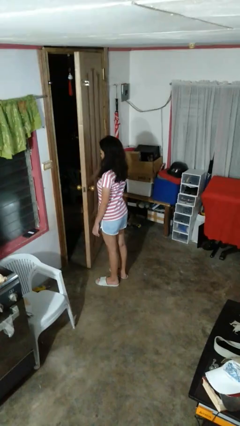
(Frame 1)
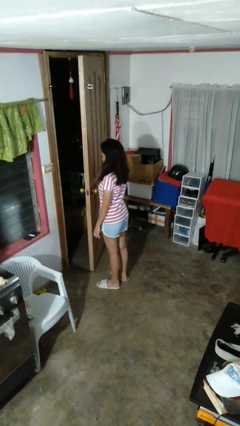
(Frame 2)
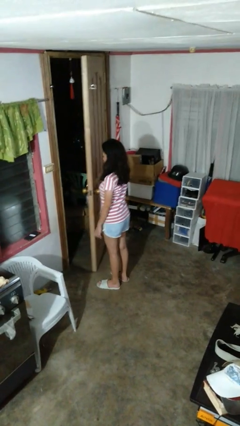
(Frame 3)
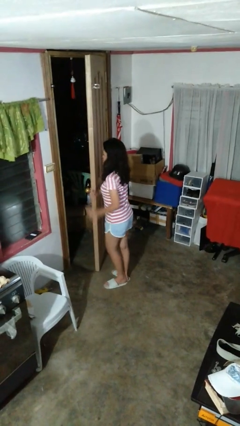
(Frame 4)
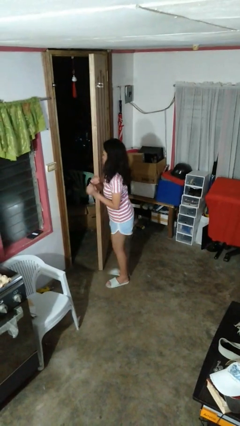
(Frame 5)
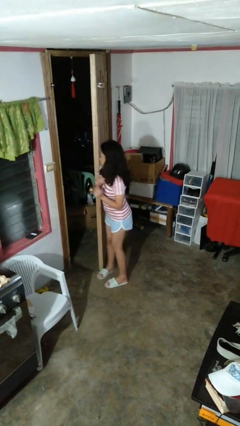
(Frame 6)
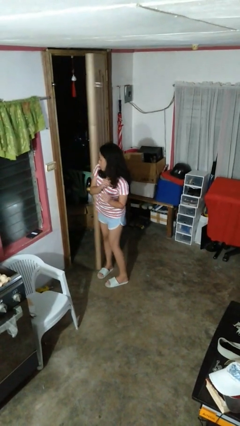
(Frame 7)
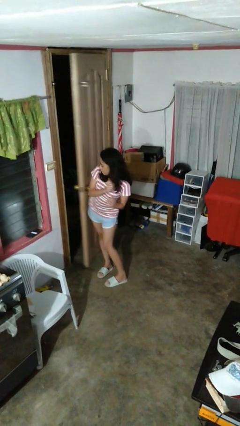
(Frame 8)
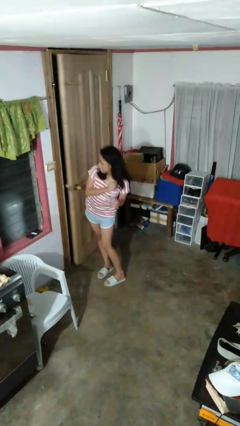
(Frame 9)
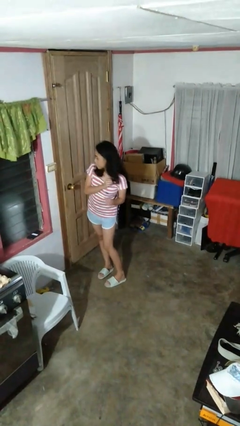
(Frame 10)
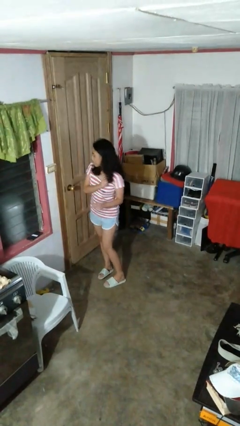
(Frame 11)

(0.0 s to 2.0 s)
person closes door with hip

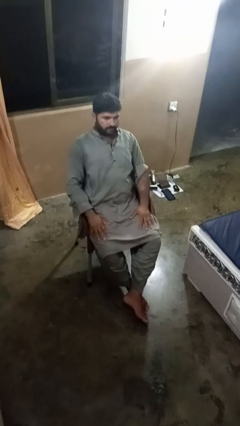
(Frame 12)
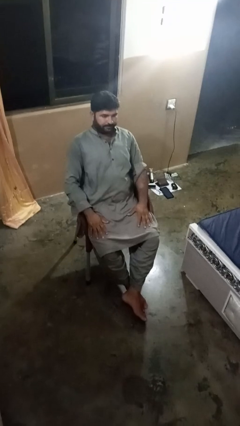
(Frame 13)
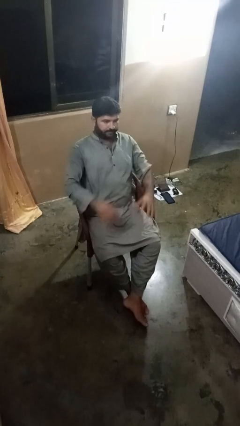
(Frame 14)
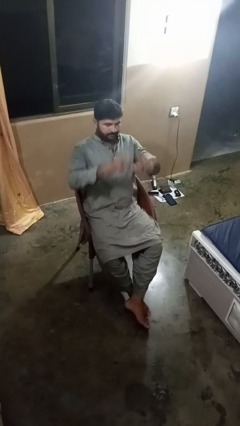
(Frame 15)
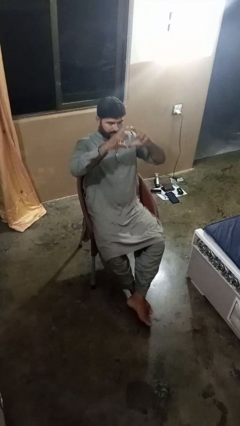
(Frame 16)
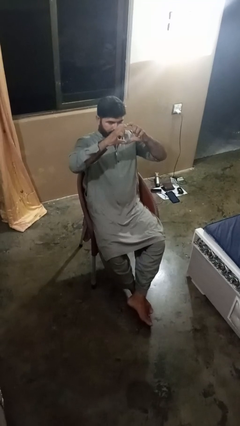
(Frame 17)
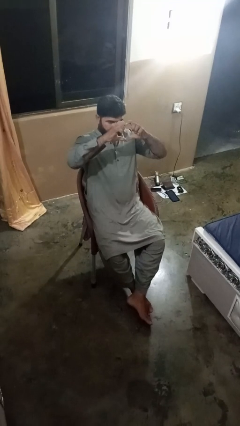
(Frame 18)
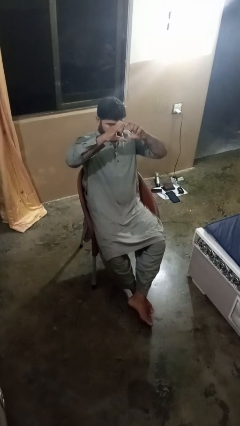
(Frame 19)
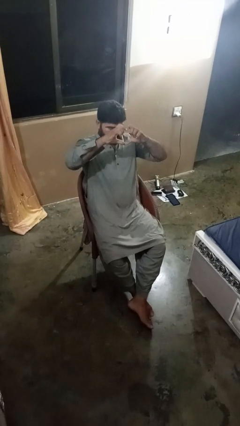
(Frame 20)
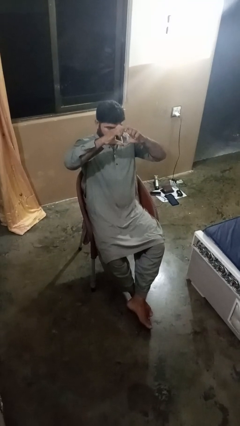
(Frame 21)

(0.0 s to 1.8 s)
person gestures heart

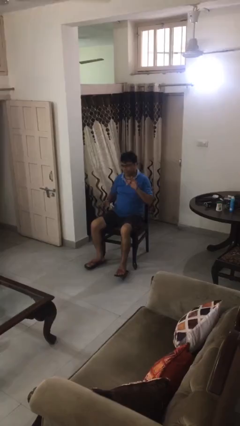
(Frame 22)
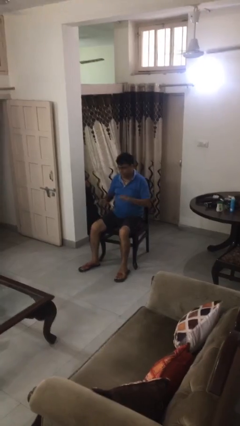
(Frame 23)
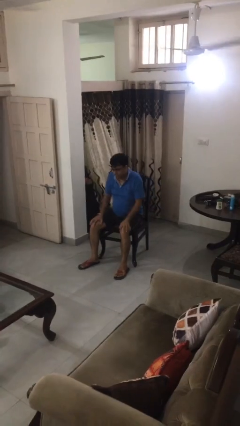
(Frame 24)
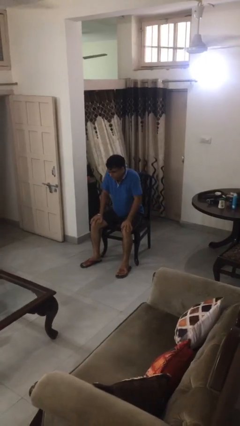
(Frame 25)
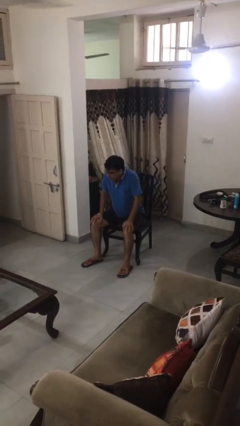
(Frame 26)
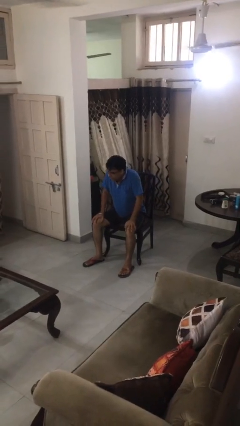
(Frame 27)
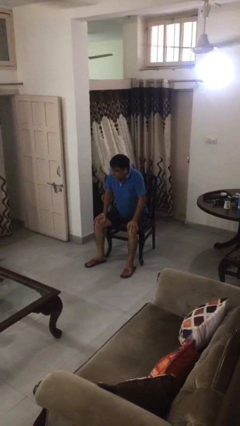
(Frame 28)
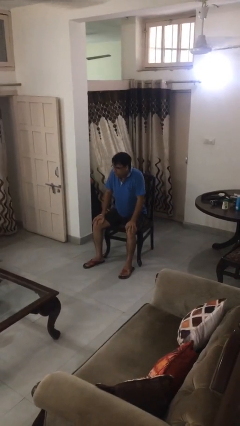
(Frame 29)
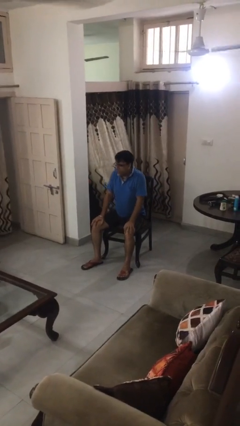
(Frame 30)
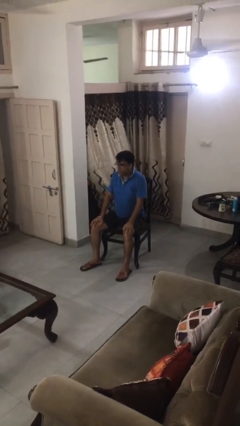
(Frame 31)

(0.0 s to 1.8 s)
person slaps hands on thighs

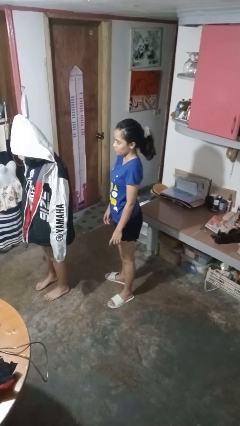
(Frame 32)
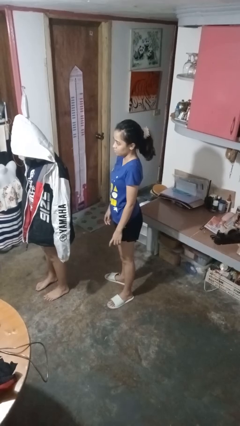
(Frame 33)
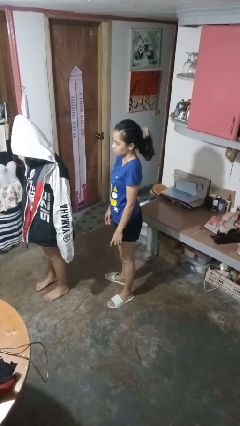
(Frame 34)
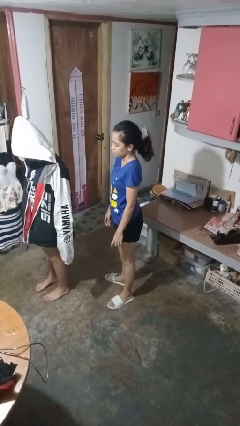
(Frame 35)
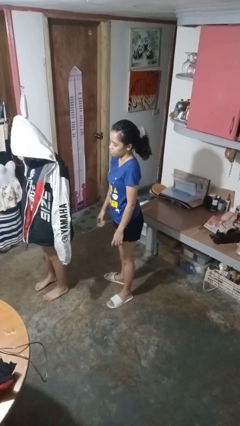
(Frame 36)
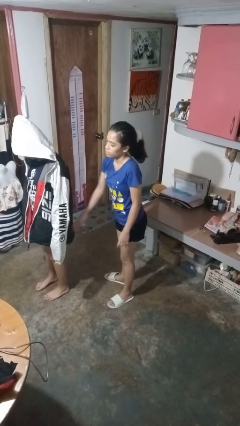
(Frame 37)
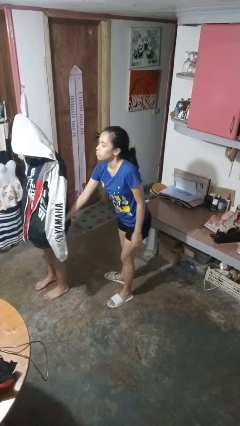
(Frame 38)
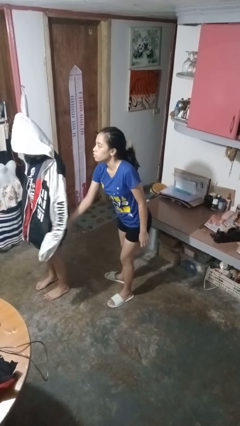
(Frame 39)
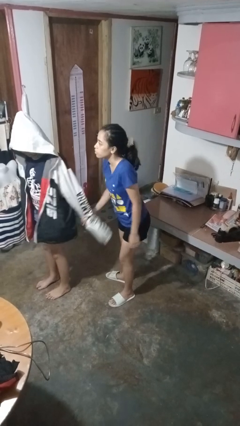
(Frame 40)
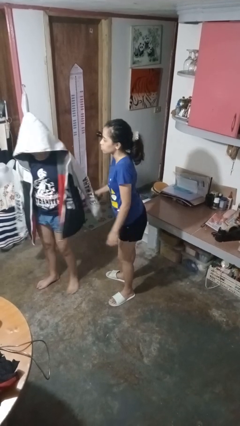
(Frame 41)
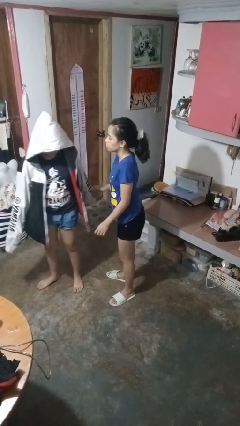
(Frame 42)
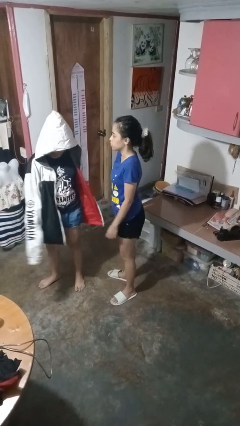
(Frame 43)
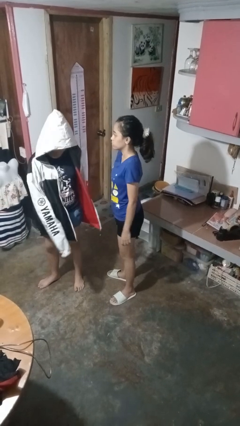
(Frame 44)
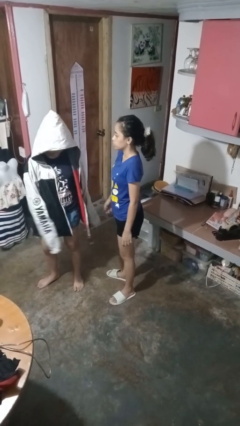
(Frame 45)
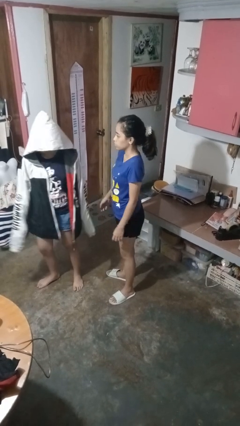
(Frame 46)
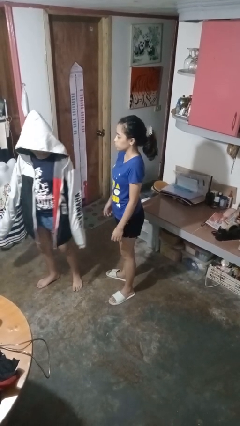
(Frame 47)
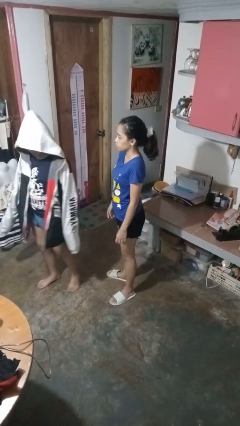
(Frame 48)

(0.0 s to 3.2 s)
person grabs person by forearm

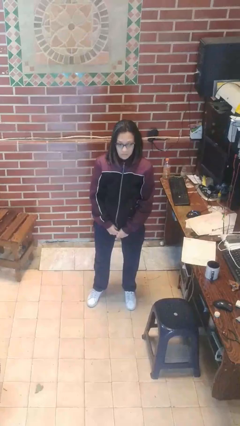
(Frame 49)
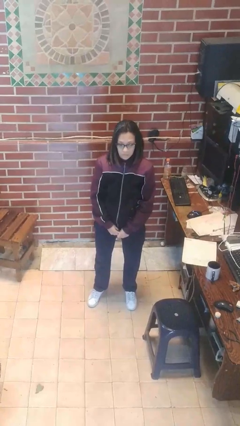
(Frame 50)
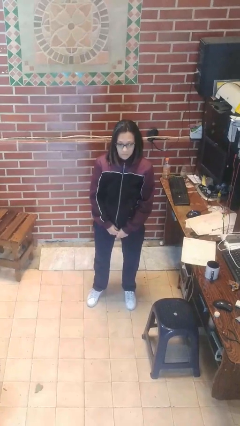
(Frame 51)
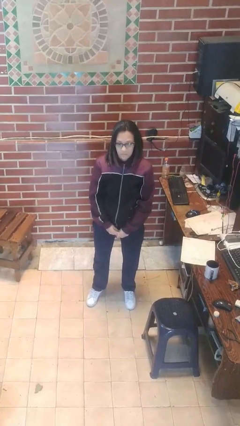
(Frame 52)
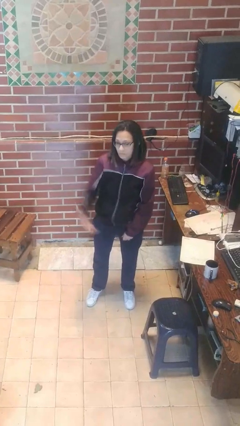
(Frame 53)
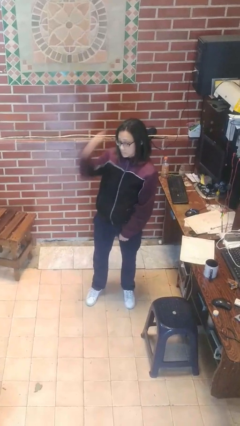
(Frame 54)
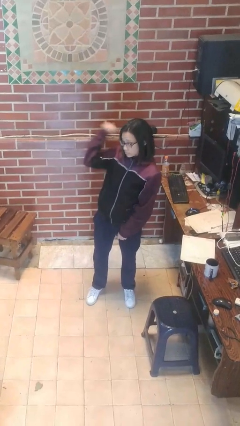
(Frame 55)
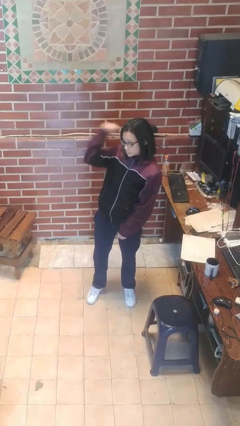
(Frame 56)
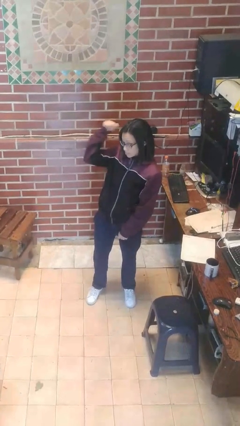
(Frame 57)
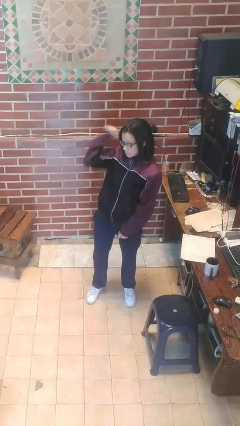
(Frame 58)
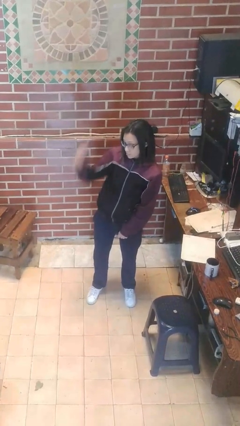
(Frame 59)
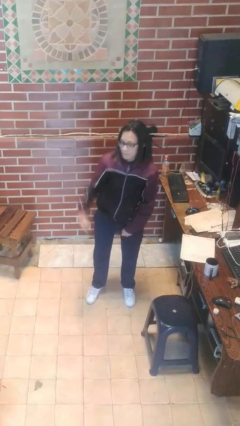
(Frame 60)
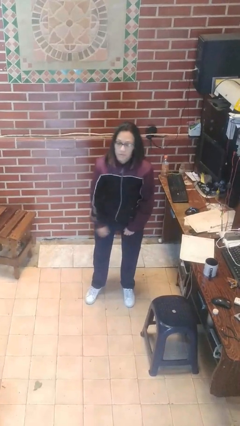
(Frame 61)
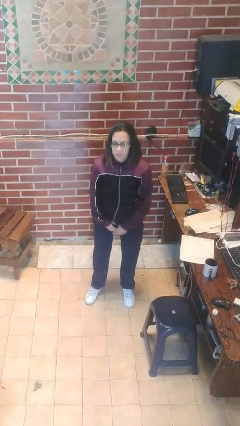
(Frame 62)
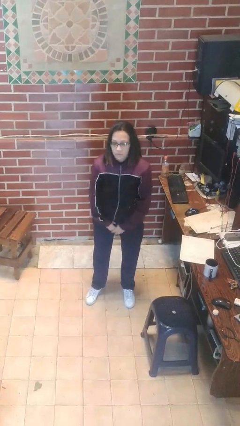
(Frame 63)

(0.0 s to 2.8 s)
person gestures behind me

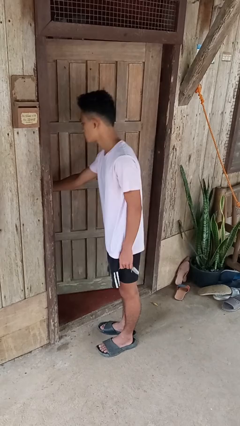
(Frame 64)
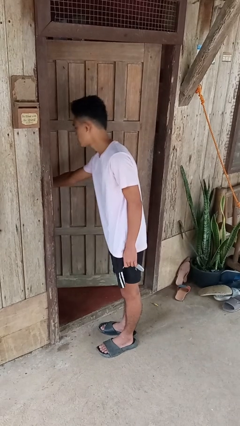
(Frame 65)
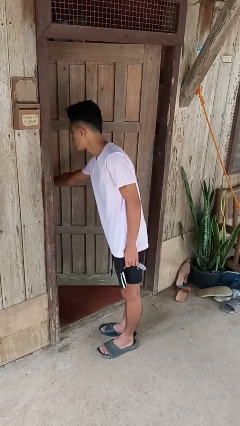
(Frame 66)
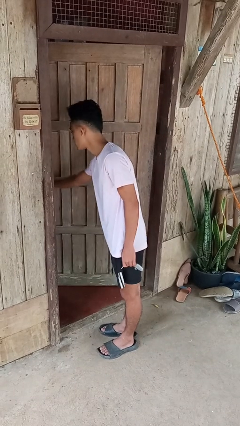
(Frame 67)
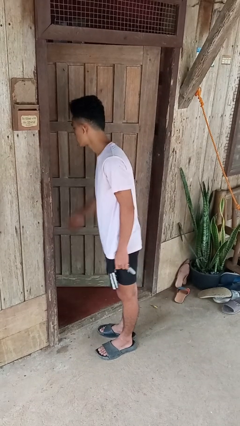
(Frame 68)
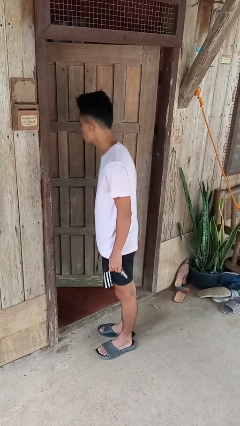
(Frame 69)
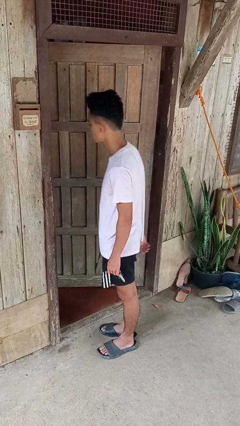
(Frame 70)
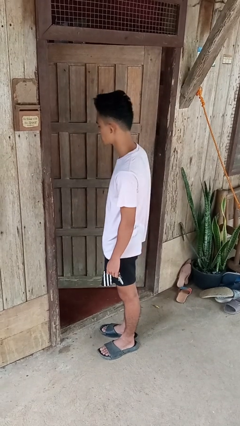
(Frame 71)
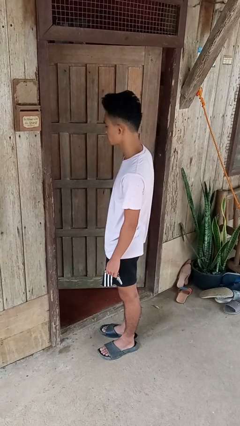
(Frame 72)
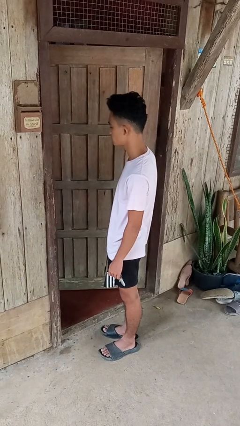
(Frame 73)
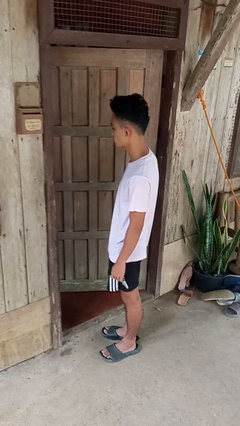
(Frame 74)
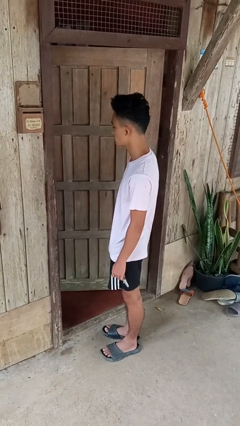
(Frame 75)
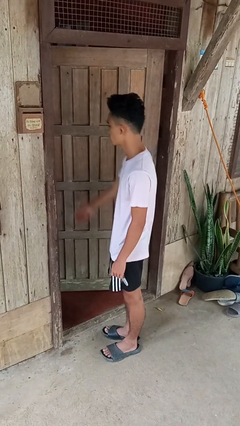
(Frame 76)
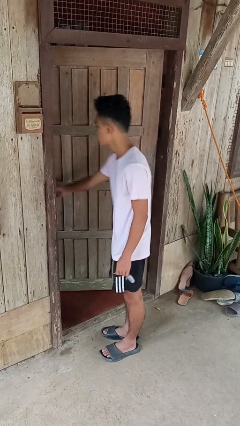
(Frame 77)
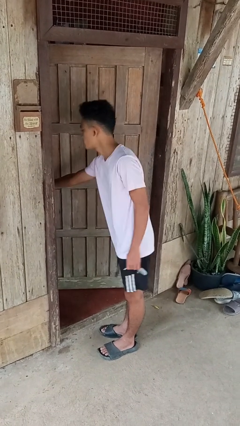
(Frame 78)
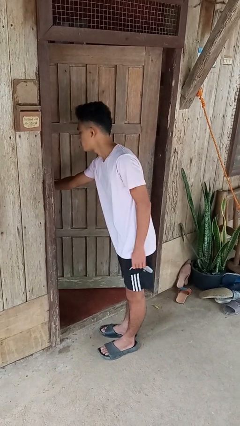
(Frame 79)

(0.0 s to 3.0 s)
person opens facility door

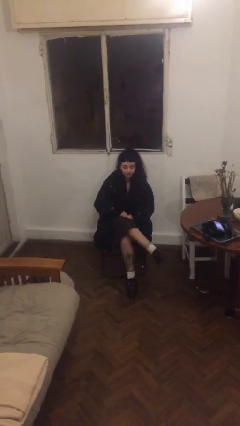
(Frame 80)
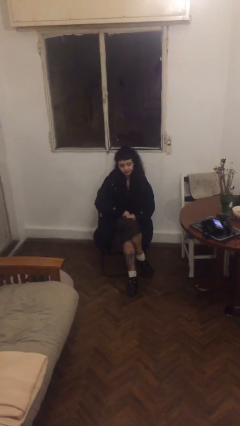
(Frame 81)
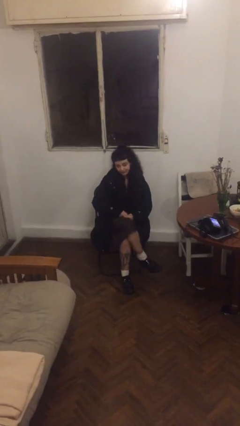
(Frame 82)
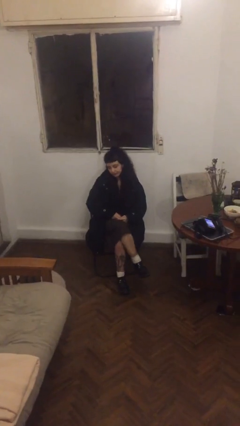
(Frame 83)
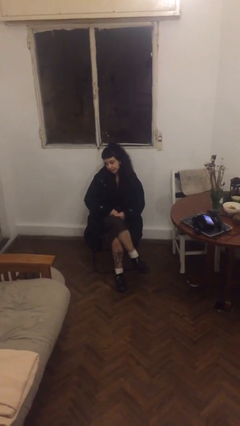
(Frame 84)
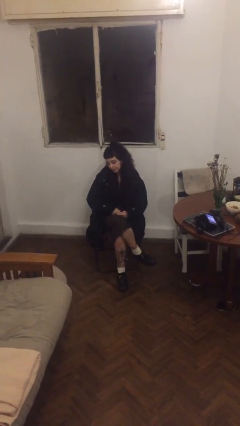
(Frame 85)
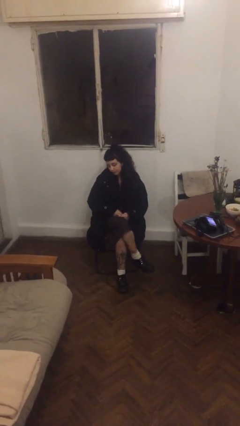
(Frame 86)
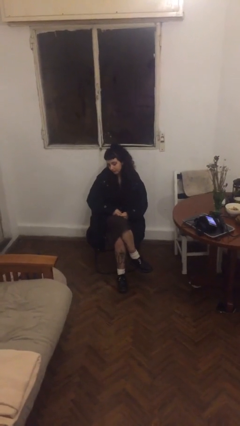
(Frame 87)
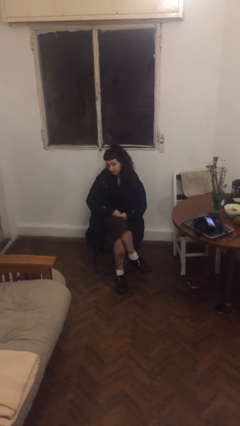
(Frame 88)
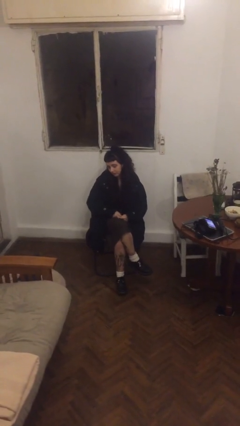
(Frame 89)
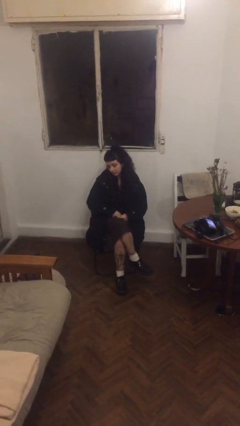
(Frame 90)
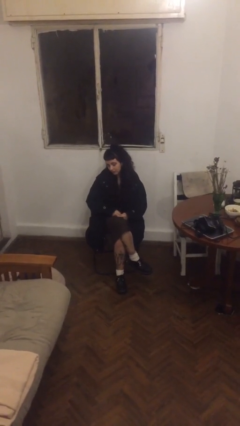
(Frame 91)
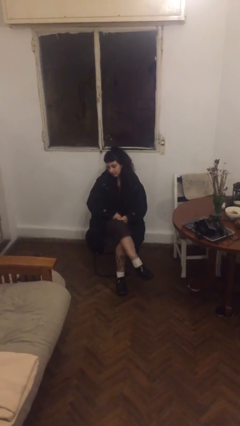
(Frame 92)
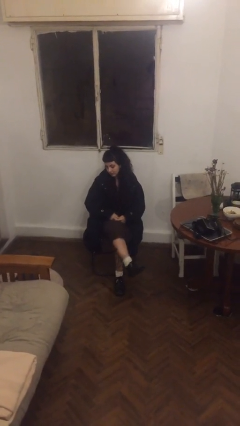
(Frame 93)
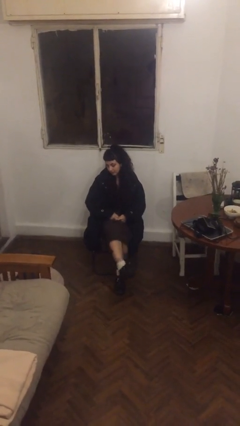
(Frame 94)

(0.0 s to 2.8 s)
person crosses legs
